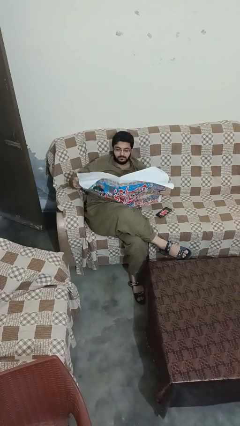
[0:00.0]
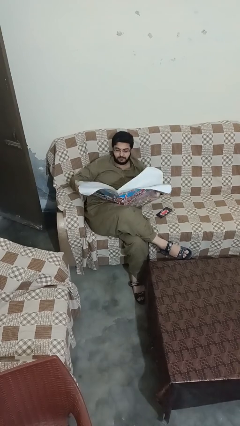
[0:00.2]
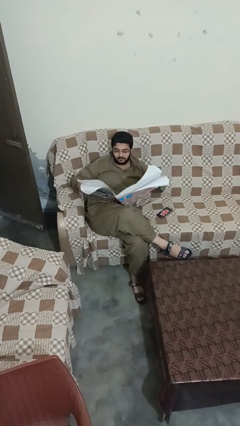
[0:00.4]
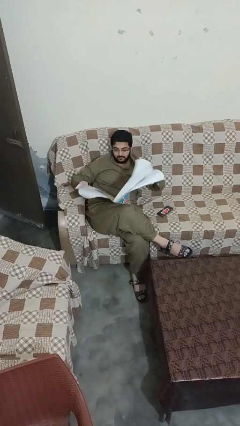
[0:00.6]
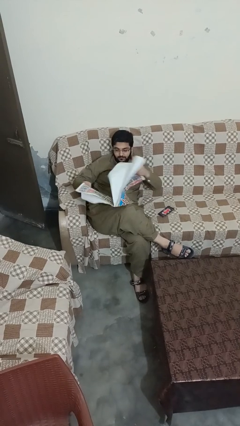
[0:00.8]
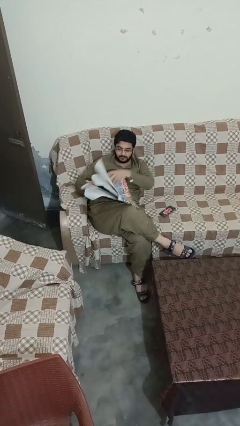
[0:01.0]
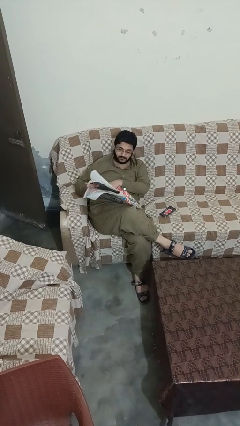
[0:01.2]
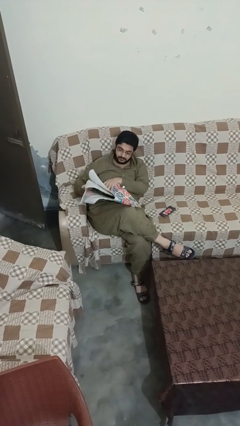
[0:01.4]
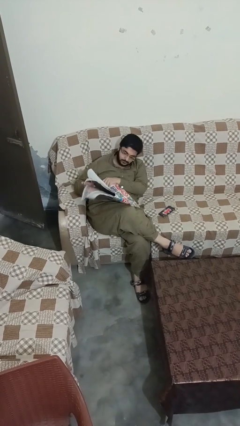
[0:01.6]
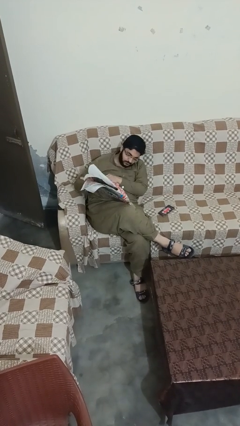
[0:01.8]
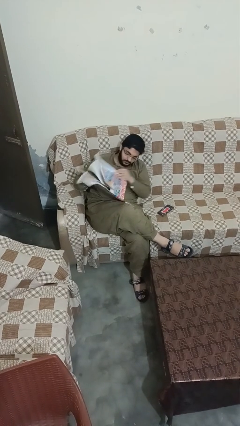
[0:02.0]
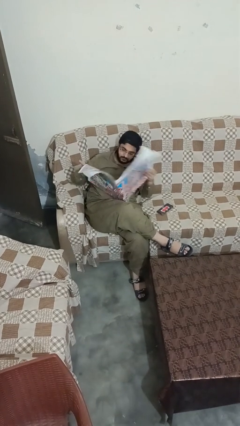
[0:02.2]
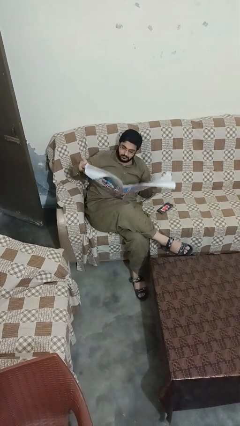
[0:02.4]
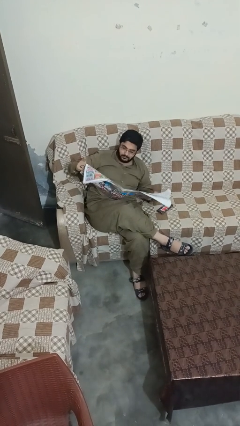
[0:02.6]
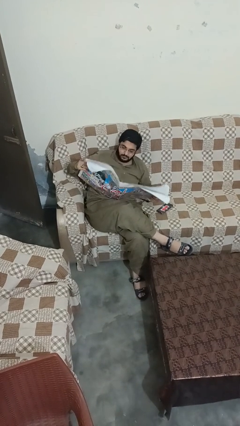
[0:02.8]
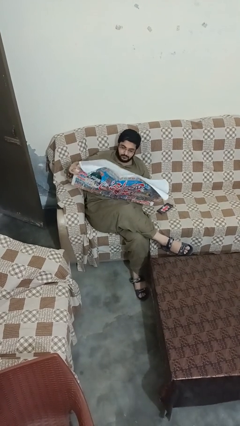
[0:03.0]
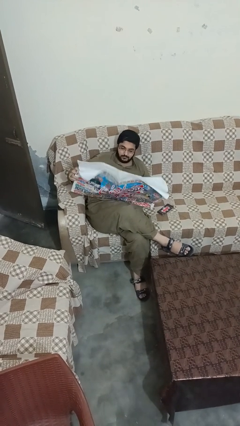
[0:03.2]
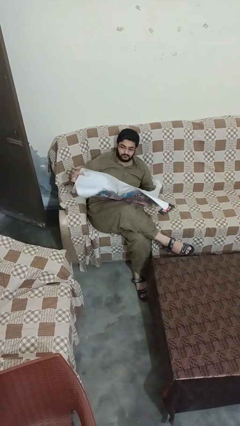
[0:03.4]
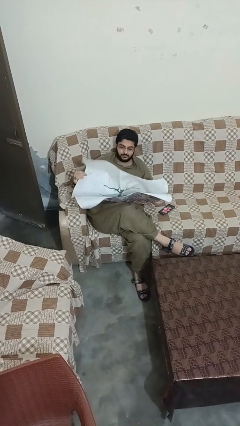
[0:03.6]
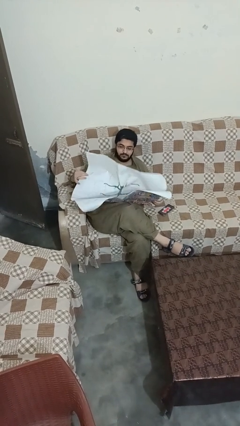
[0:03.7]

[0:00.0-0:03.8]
person reads newspaper

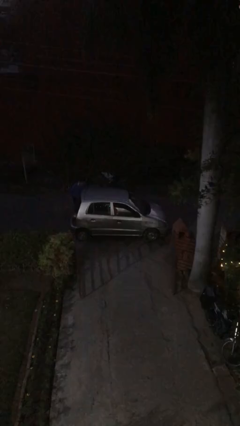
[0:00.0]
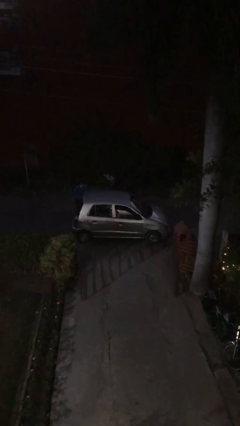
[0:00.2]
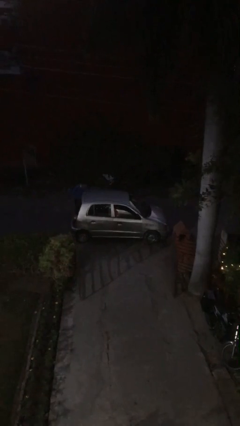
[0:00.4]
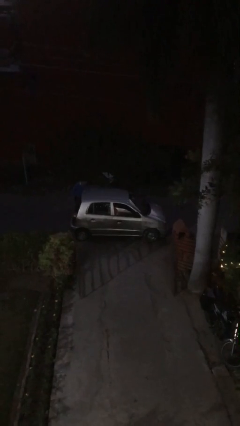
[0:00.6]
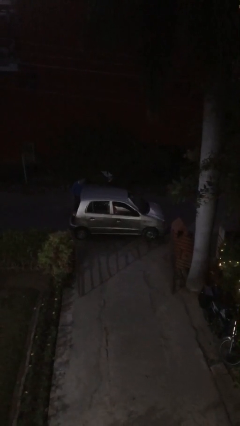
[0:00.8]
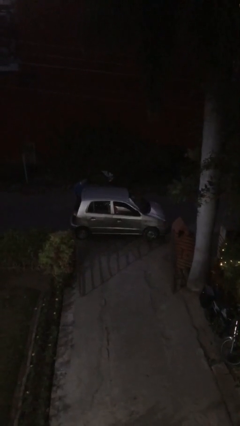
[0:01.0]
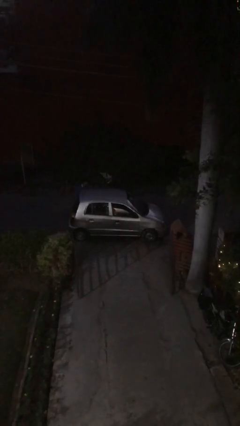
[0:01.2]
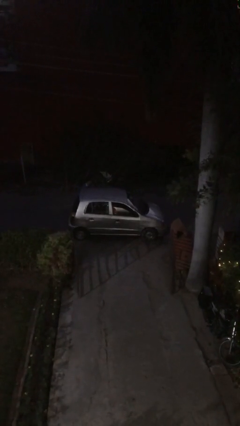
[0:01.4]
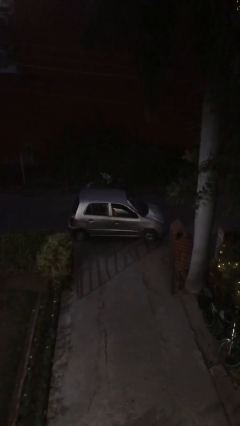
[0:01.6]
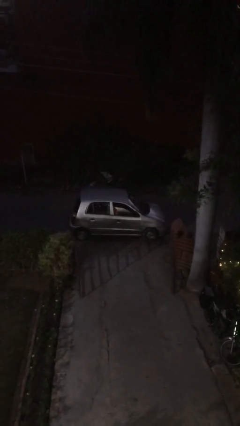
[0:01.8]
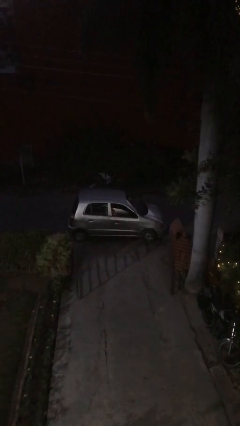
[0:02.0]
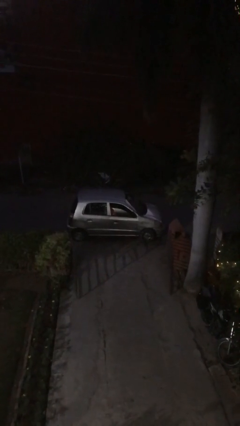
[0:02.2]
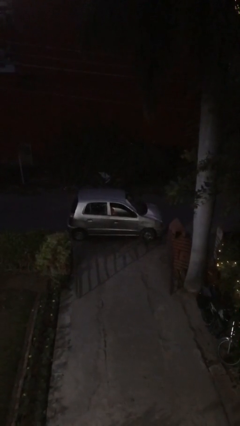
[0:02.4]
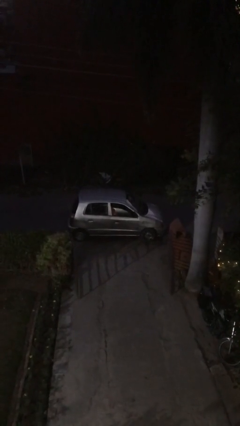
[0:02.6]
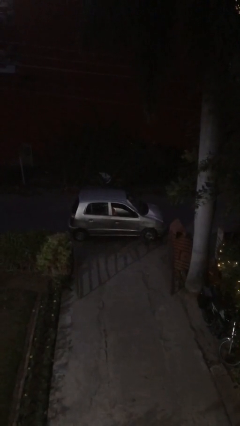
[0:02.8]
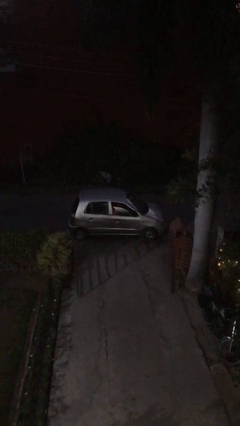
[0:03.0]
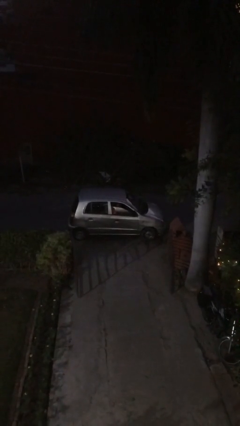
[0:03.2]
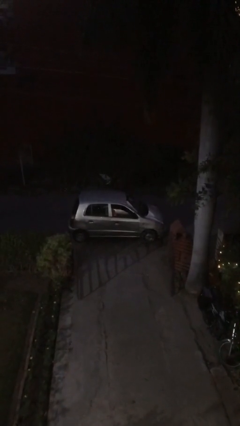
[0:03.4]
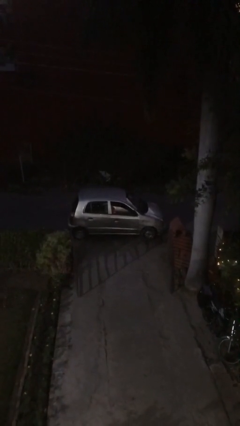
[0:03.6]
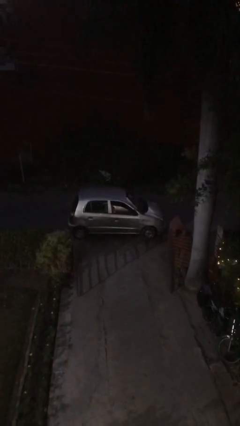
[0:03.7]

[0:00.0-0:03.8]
car picks up person

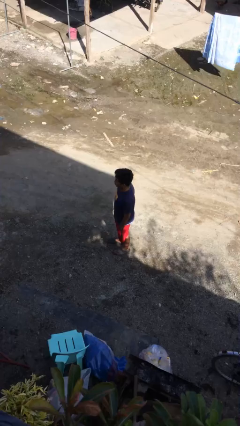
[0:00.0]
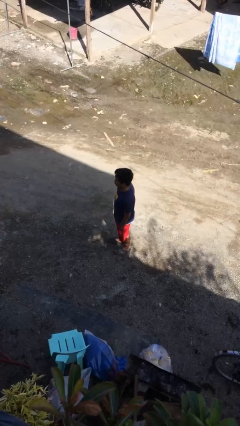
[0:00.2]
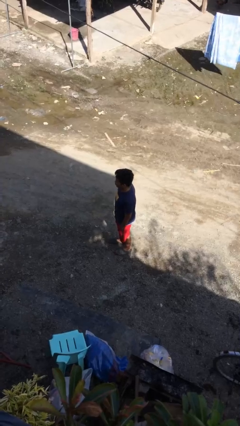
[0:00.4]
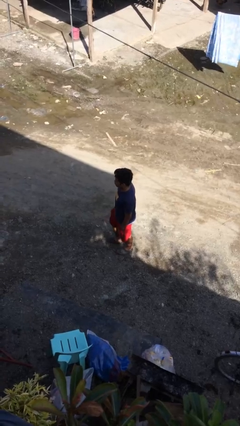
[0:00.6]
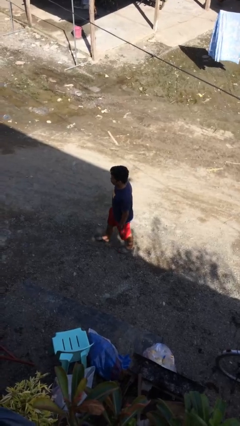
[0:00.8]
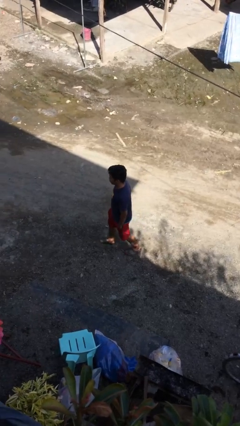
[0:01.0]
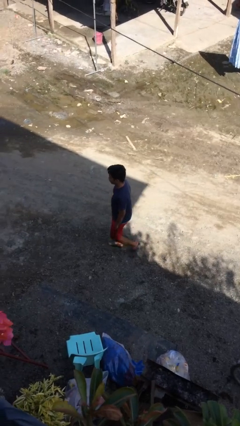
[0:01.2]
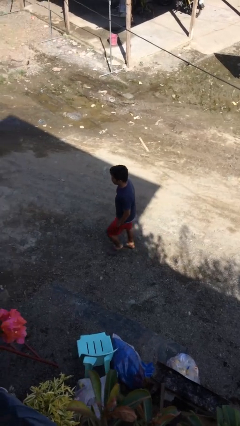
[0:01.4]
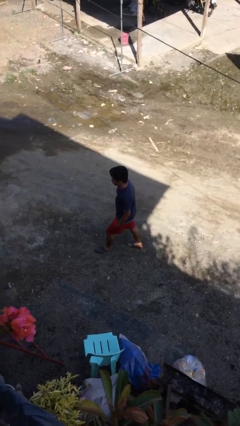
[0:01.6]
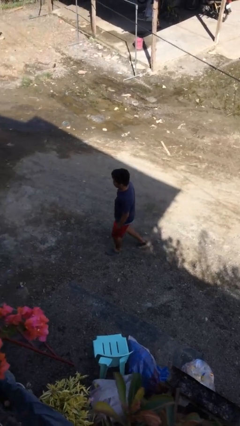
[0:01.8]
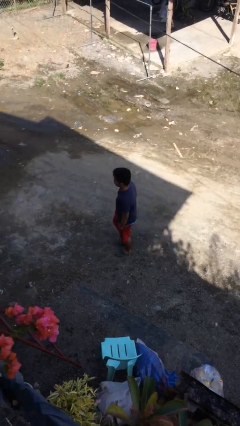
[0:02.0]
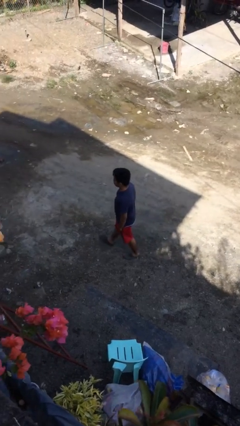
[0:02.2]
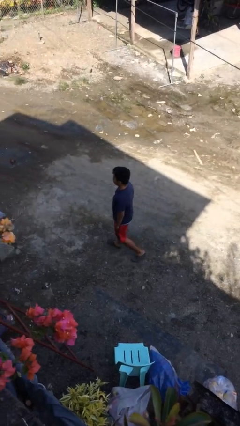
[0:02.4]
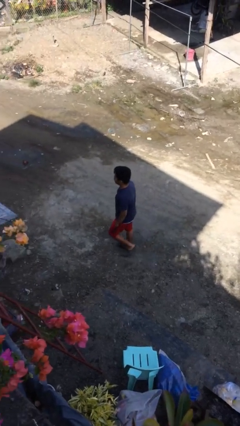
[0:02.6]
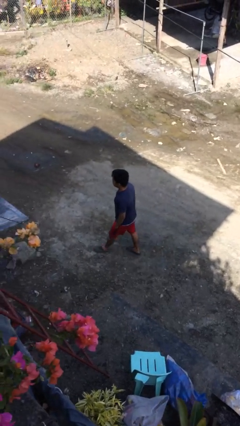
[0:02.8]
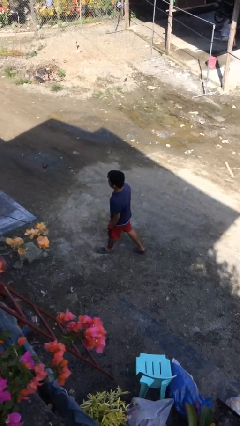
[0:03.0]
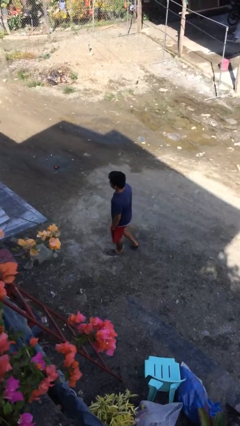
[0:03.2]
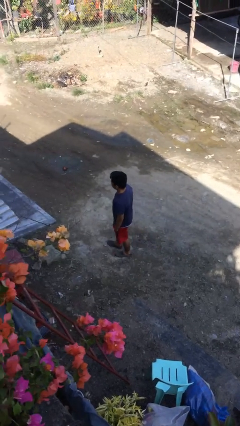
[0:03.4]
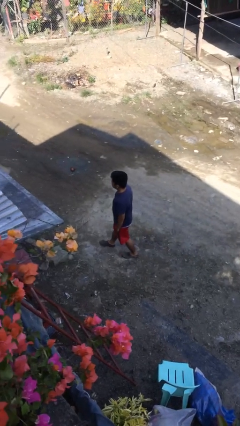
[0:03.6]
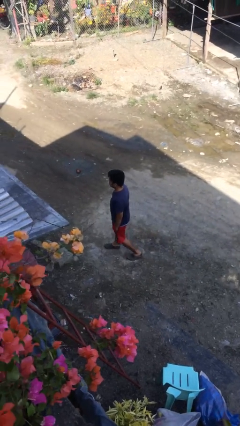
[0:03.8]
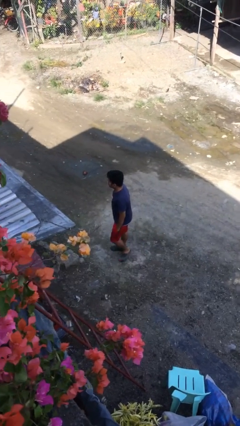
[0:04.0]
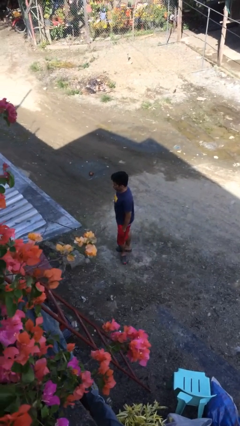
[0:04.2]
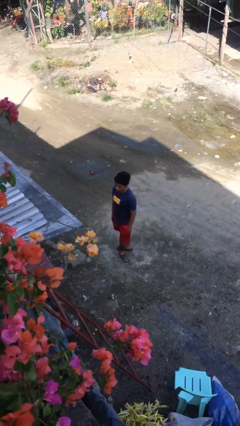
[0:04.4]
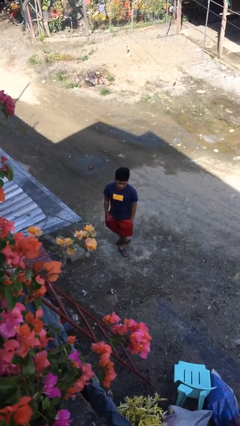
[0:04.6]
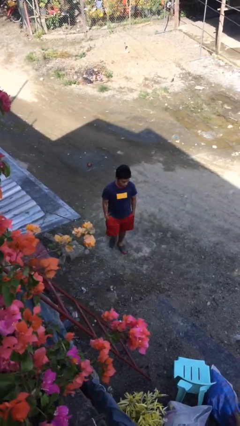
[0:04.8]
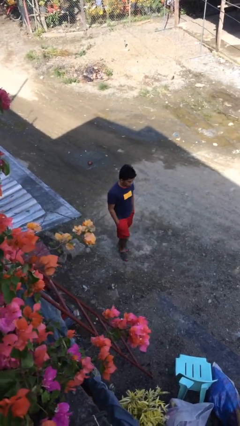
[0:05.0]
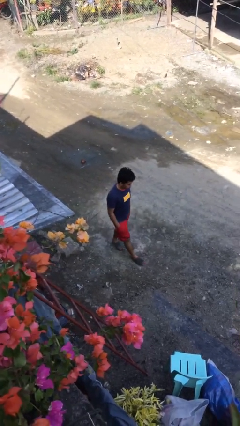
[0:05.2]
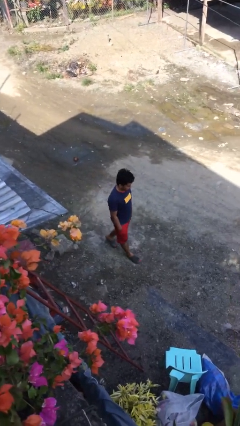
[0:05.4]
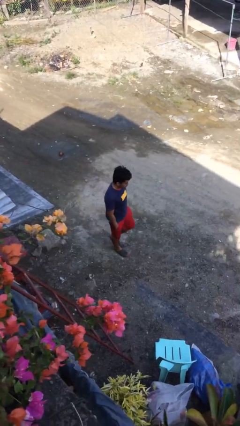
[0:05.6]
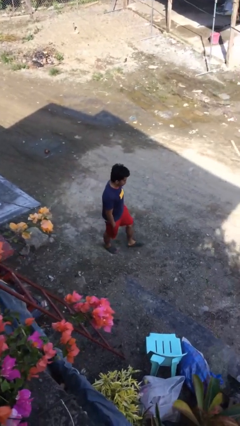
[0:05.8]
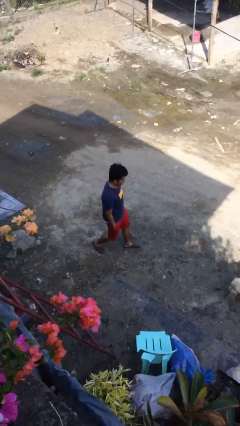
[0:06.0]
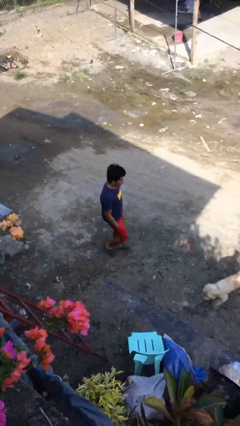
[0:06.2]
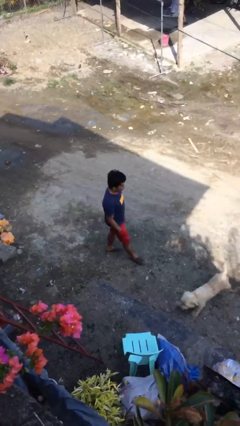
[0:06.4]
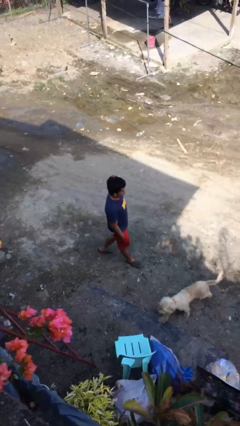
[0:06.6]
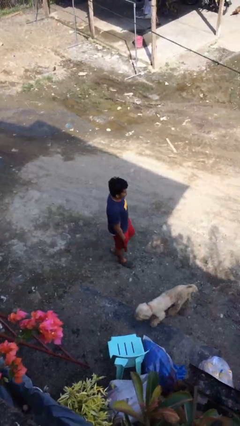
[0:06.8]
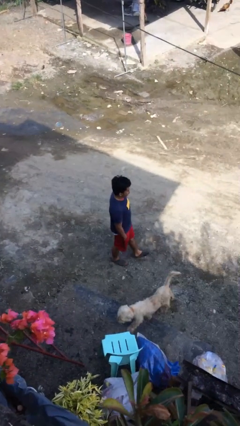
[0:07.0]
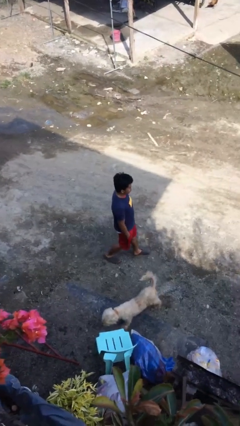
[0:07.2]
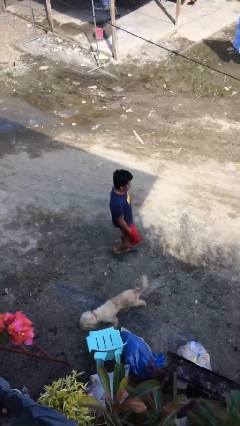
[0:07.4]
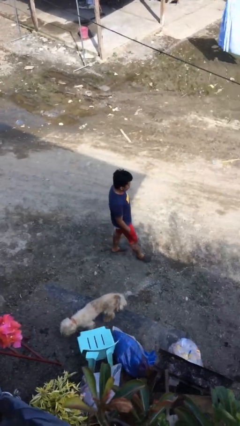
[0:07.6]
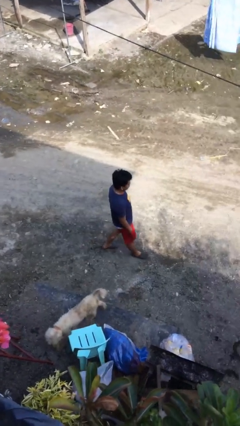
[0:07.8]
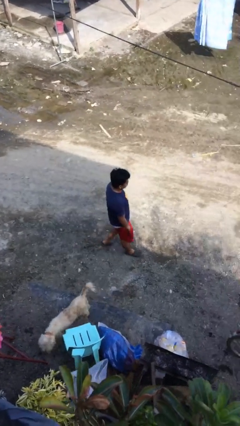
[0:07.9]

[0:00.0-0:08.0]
person walks

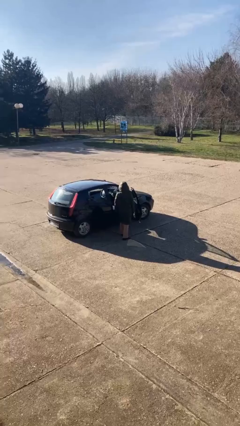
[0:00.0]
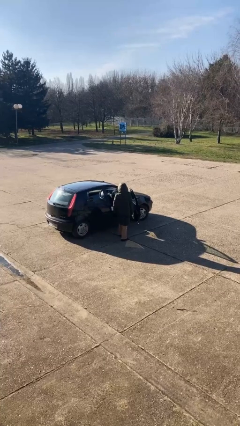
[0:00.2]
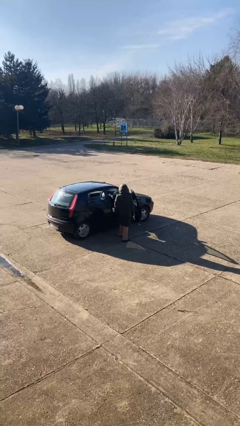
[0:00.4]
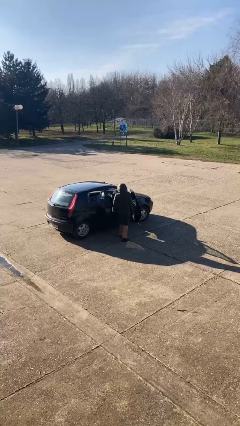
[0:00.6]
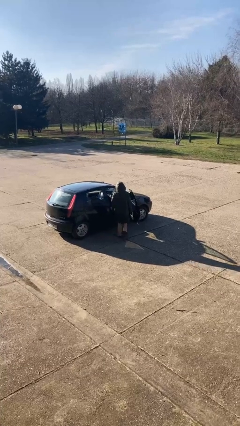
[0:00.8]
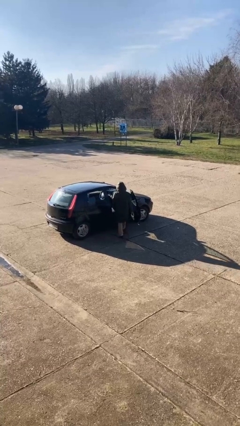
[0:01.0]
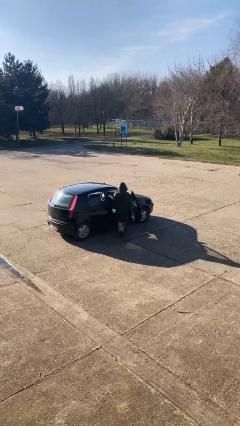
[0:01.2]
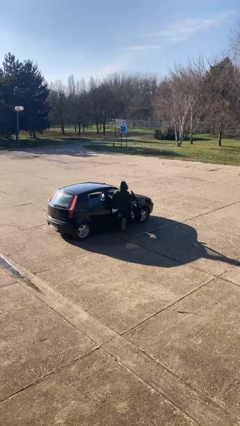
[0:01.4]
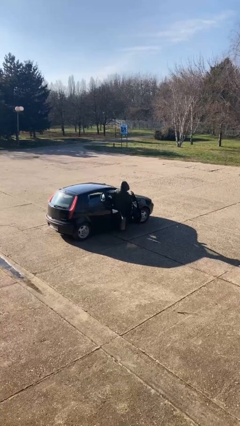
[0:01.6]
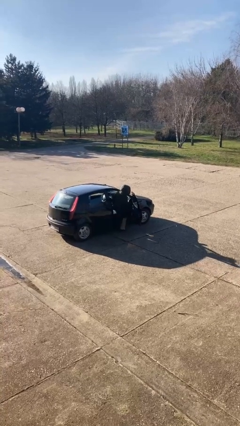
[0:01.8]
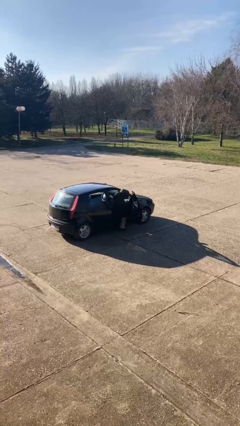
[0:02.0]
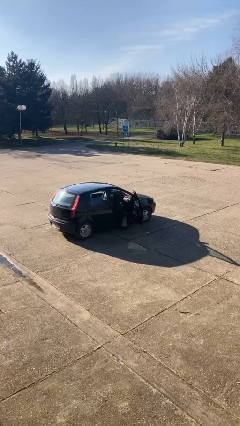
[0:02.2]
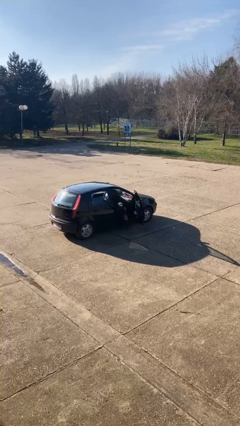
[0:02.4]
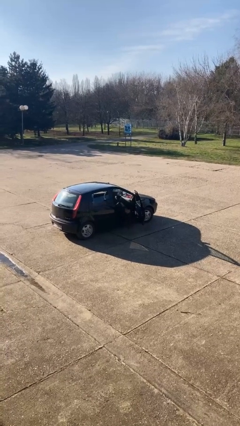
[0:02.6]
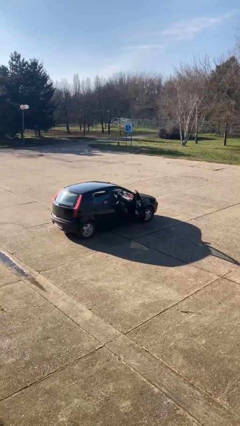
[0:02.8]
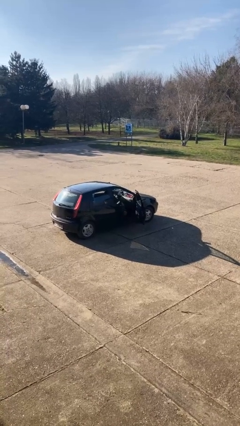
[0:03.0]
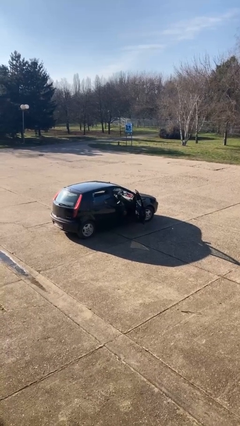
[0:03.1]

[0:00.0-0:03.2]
person enters car
